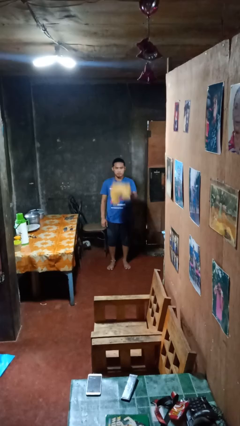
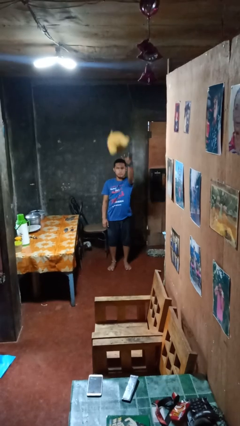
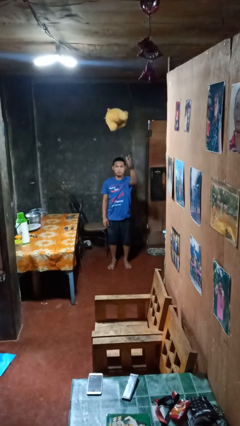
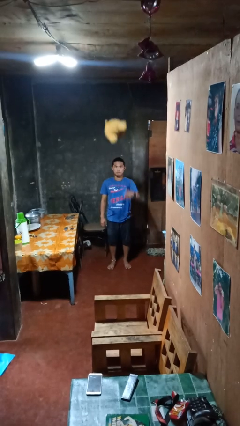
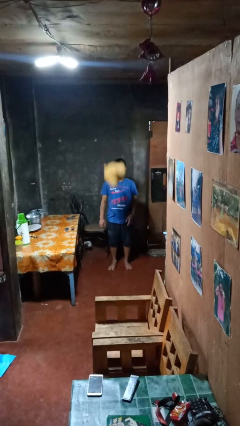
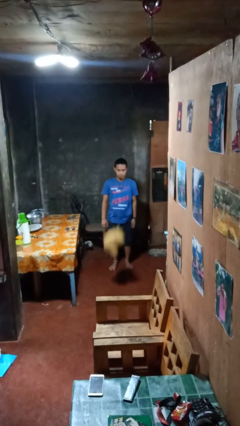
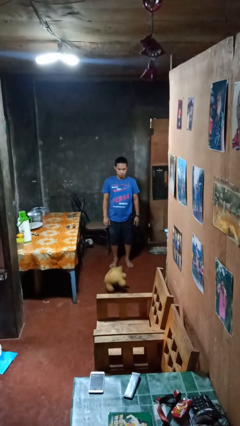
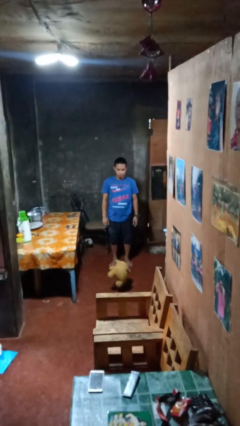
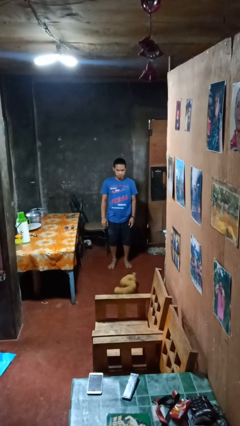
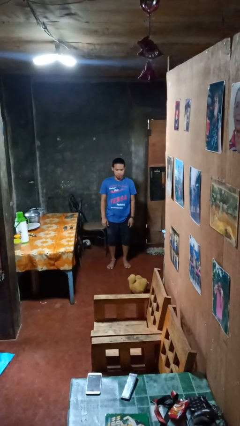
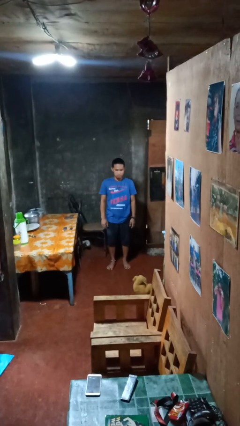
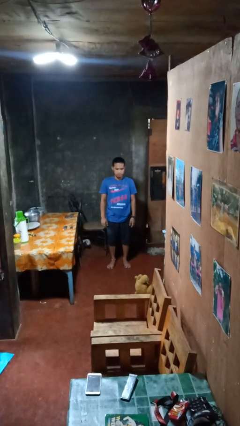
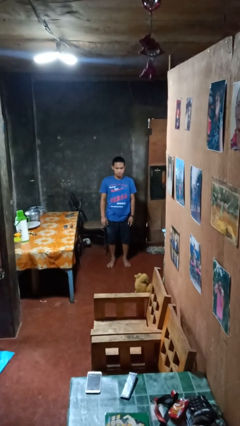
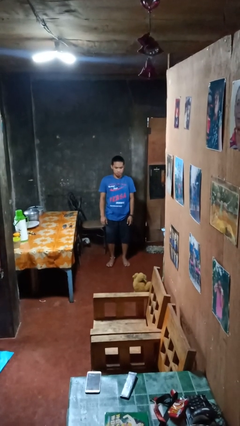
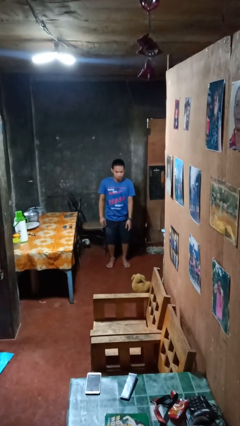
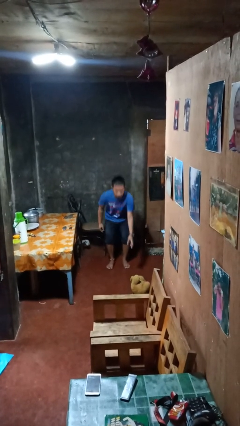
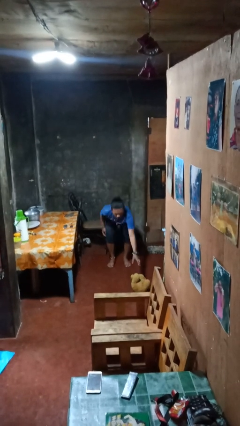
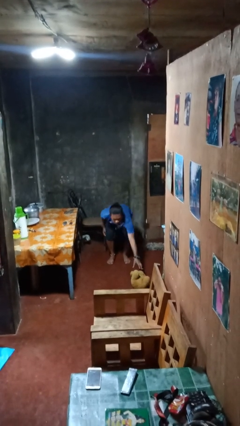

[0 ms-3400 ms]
person throws object into air

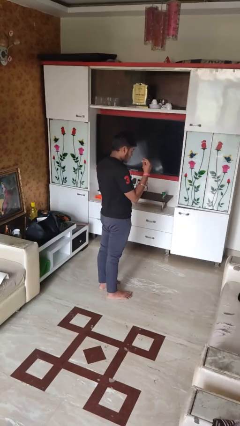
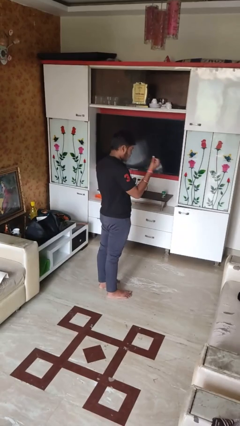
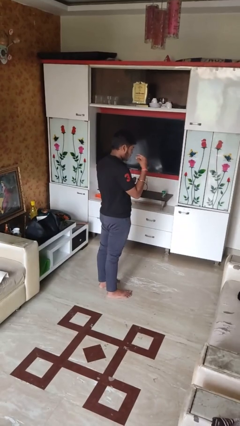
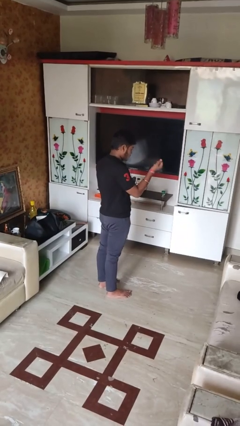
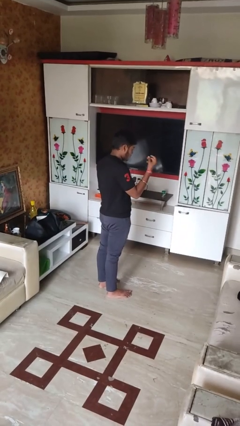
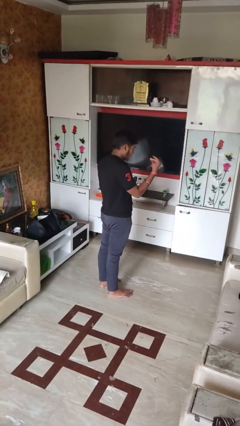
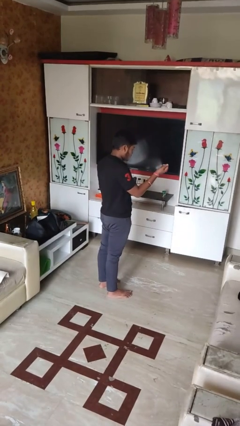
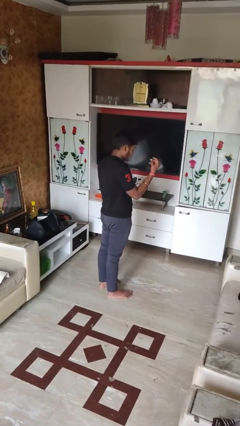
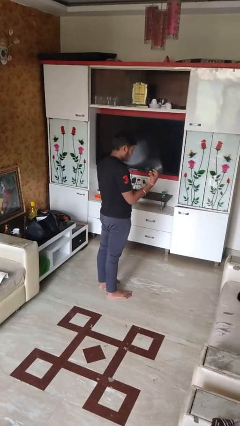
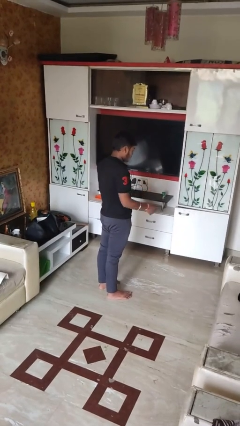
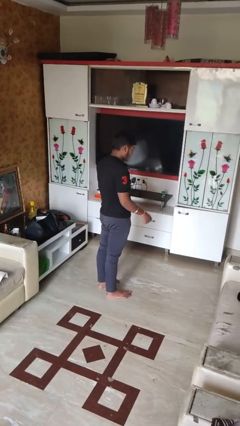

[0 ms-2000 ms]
person snaps fingers

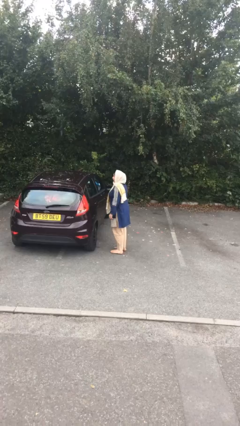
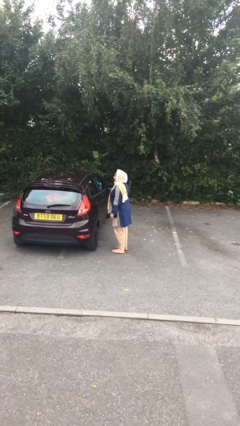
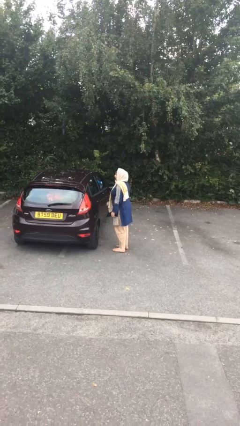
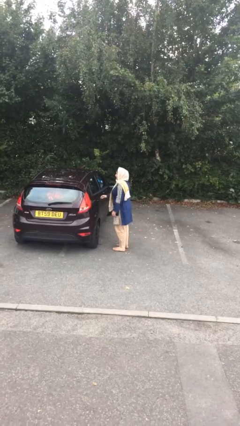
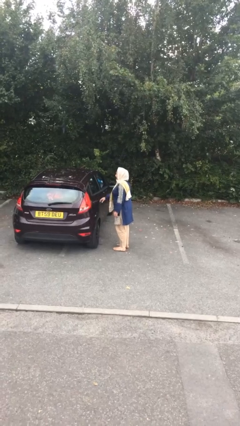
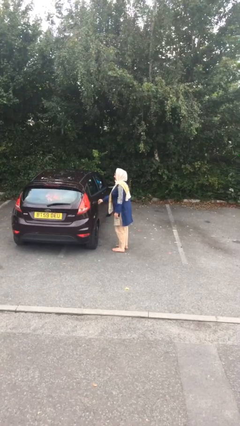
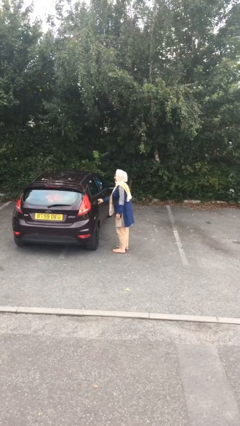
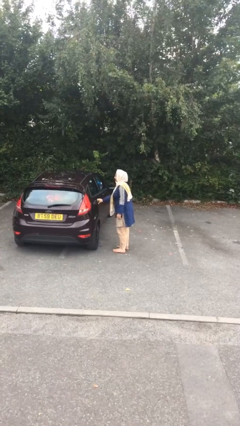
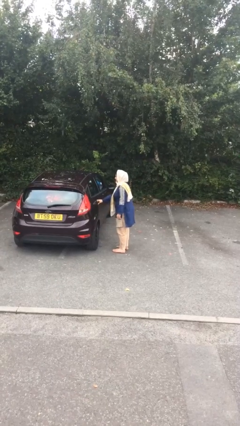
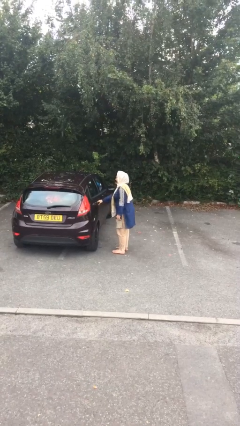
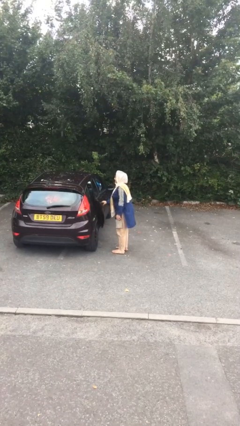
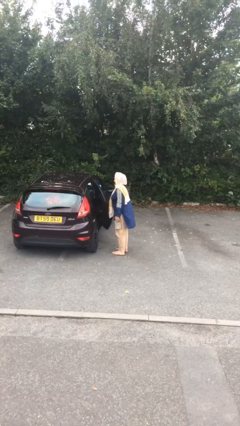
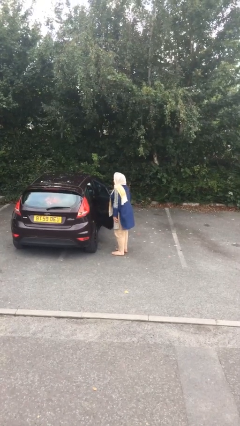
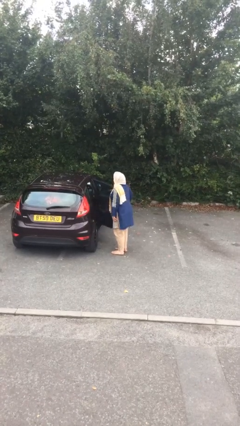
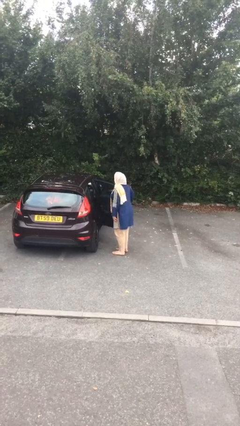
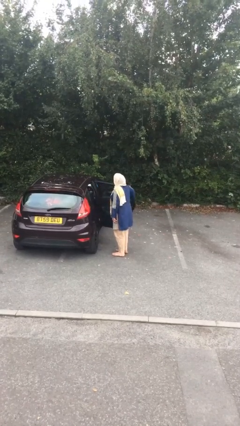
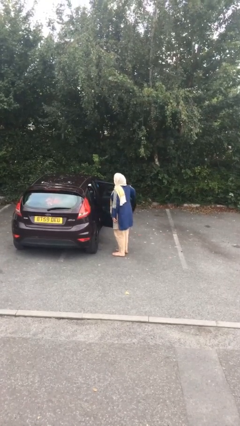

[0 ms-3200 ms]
person opens car door

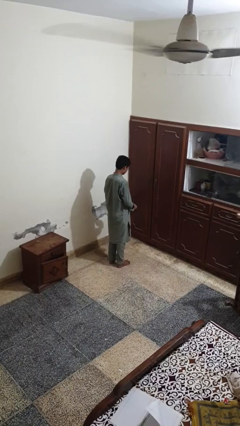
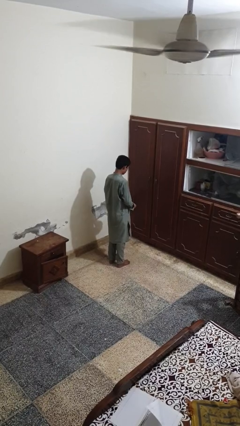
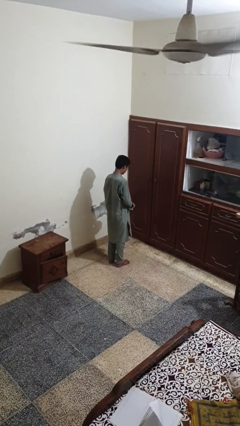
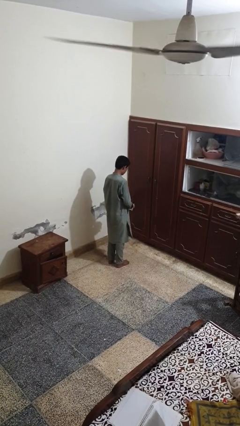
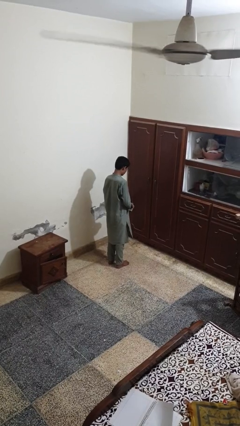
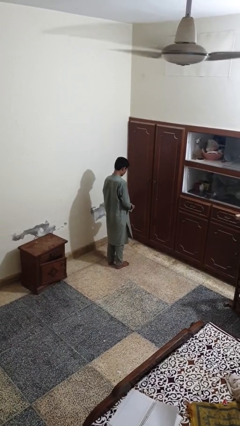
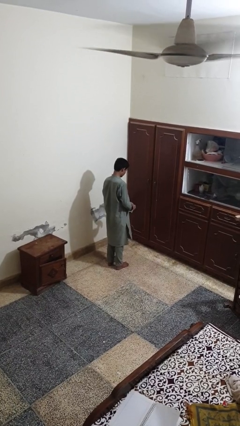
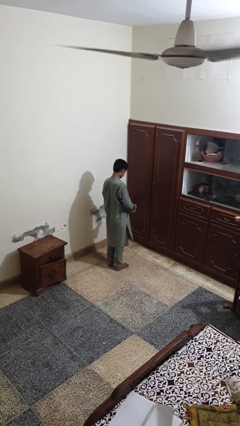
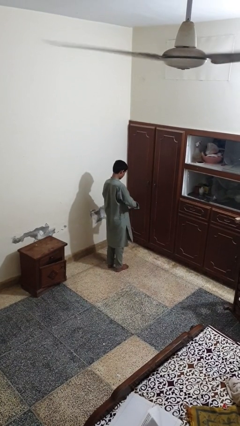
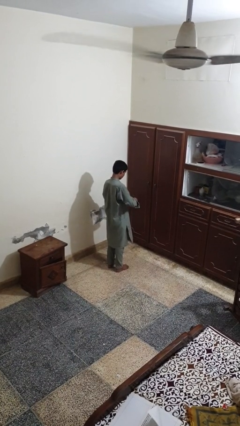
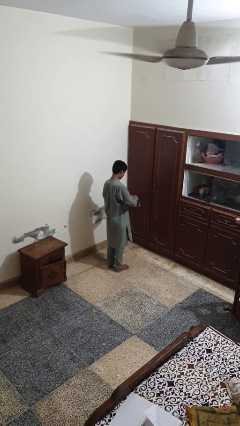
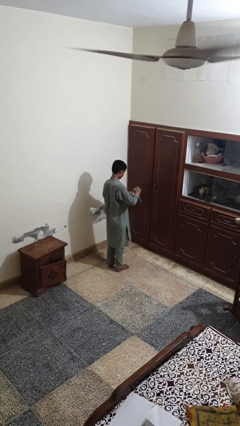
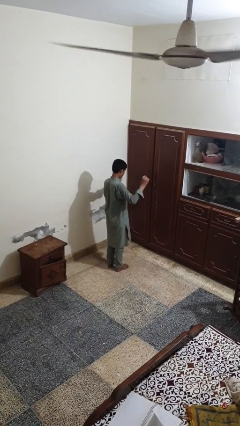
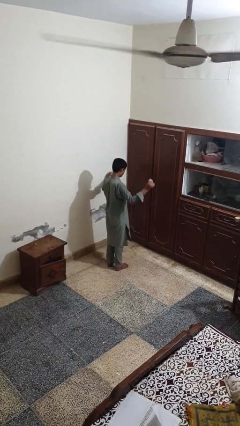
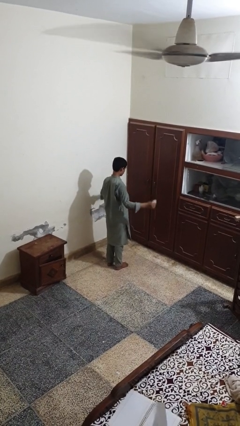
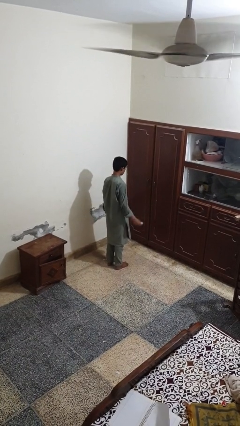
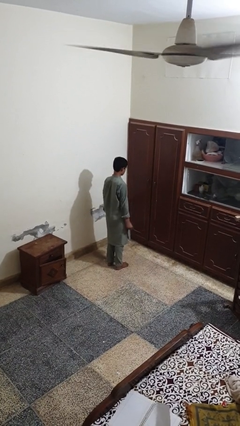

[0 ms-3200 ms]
person tears paper

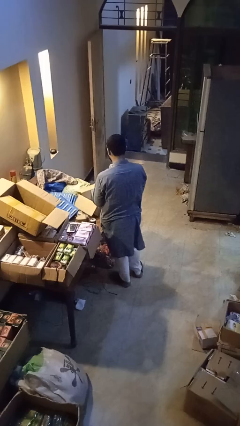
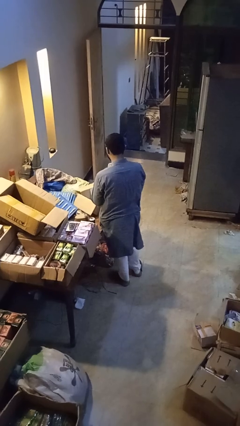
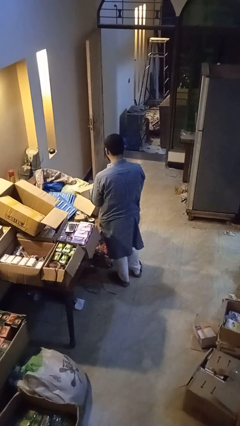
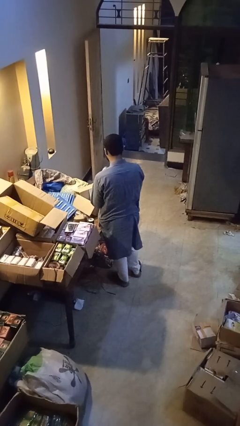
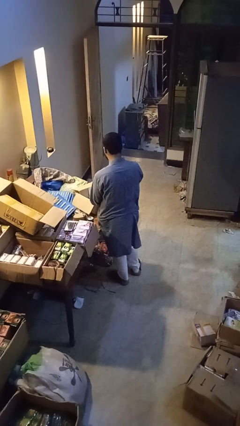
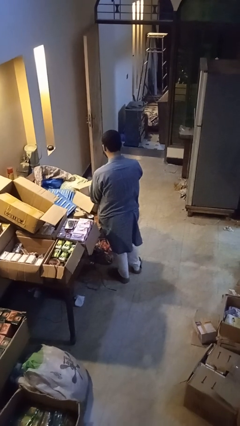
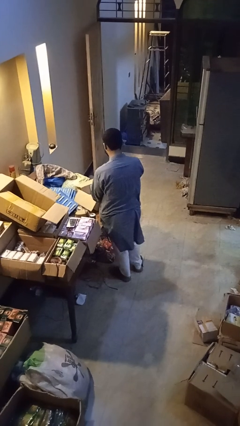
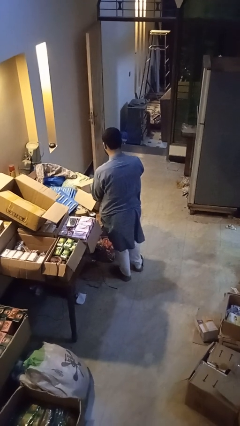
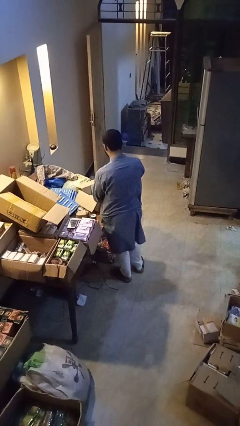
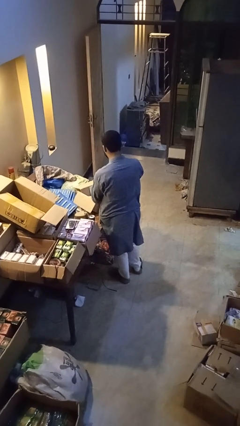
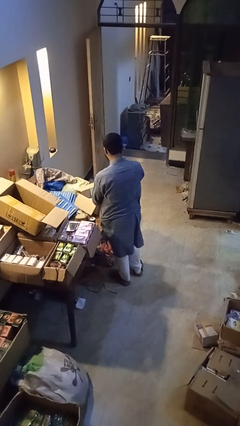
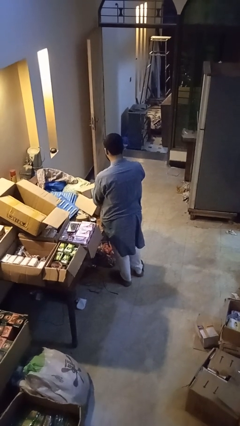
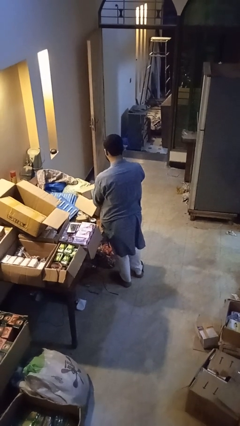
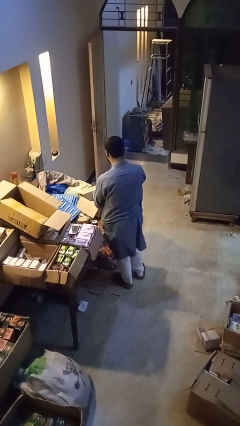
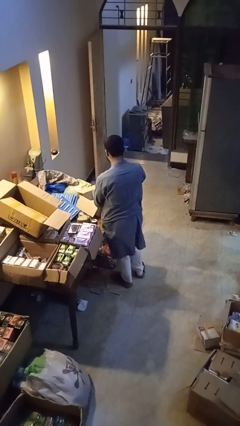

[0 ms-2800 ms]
person puts object into box

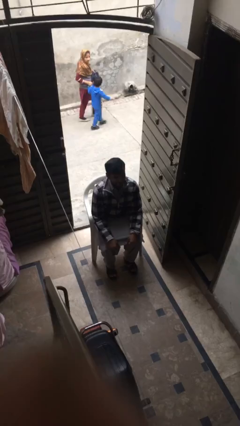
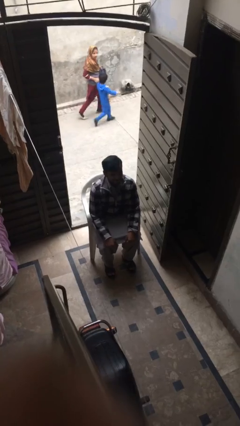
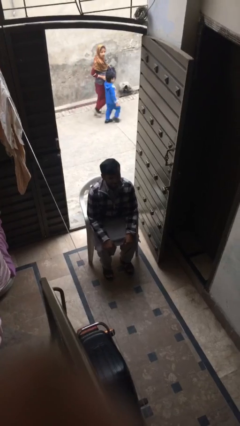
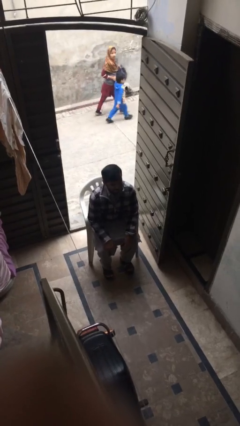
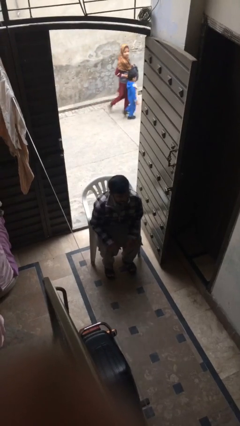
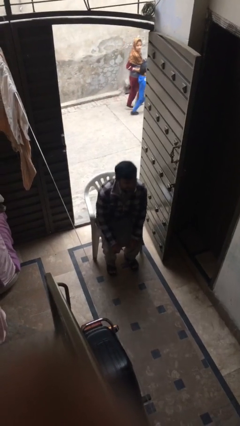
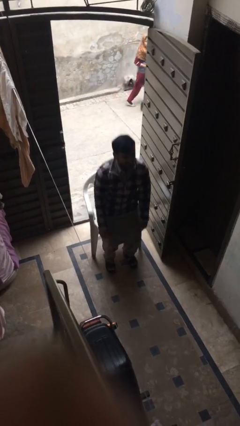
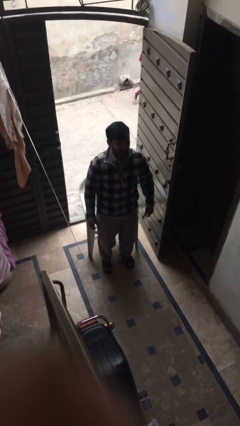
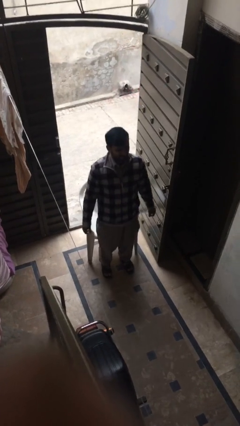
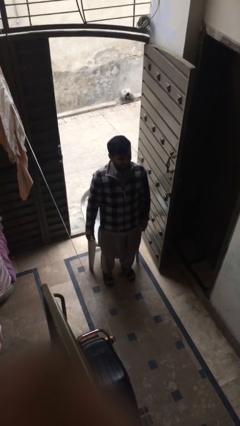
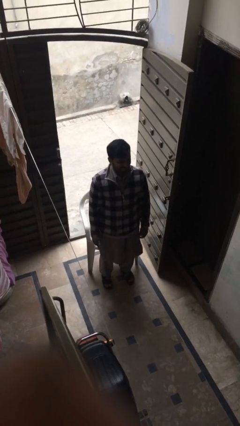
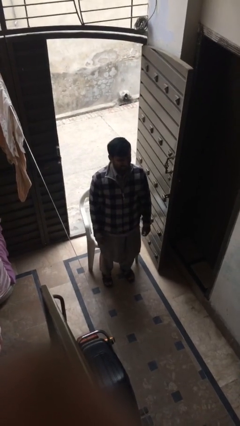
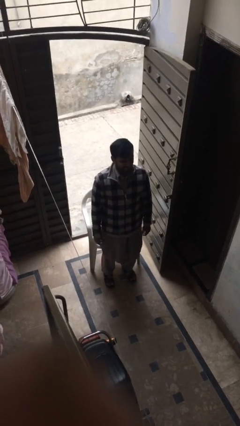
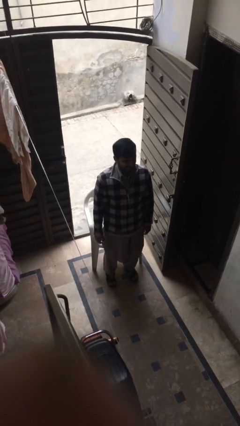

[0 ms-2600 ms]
person stands up
